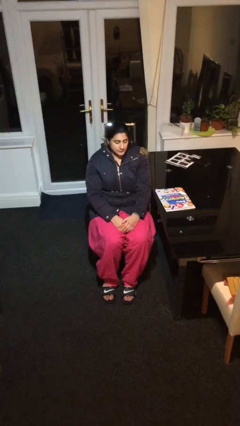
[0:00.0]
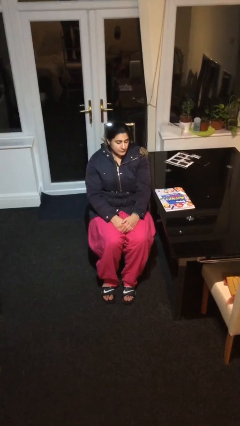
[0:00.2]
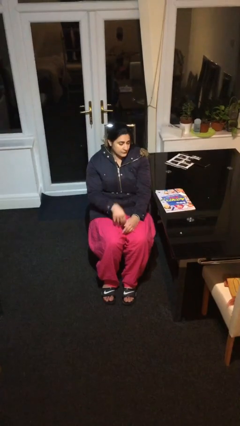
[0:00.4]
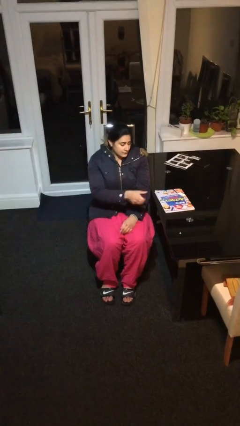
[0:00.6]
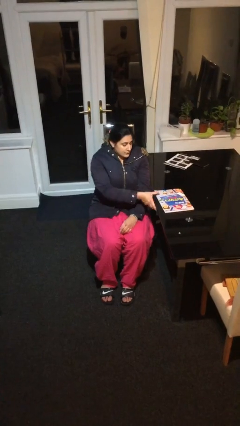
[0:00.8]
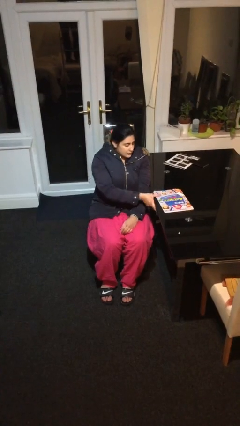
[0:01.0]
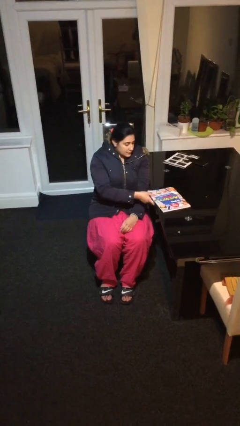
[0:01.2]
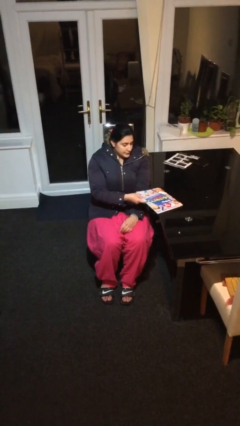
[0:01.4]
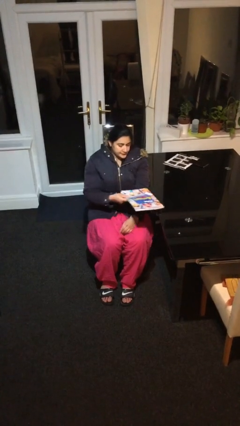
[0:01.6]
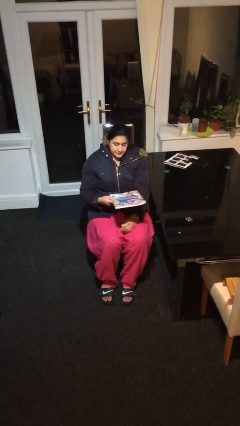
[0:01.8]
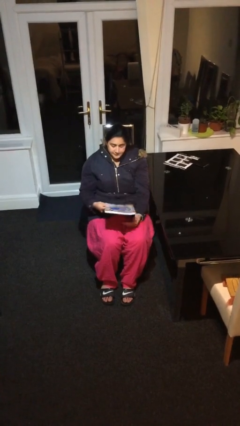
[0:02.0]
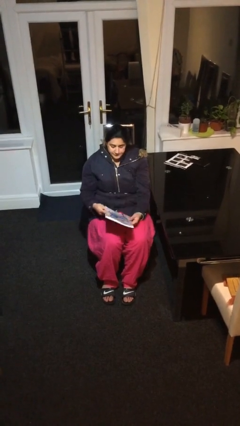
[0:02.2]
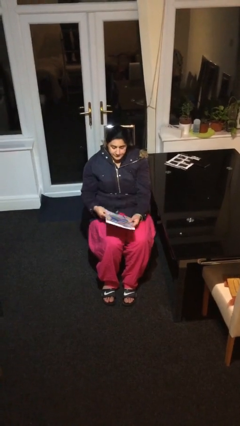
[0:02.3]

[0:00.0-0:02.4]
person picks up object from table

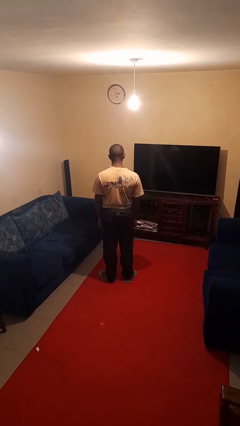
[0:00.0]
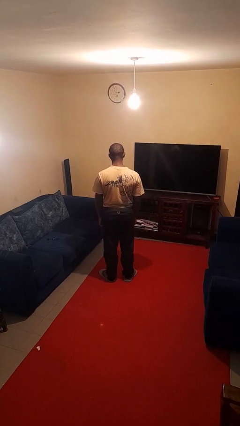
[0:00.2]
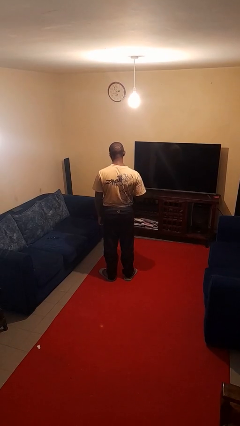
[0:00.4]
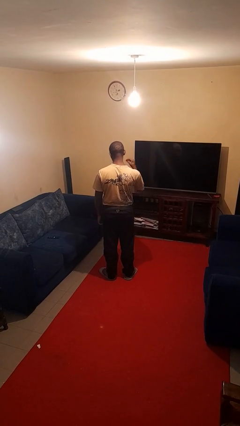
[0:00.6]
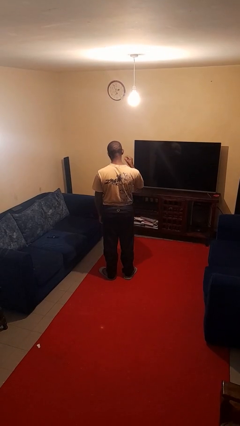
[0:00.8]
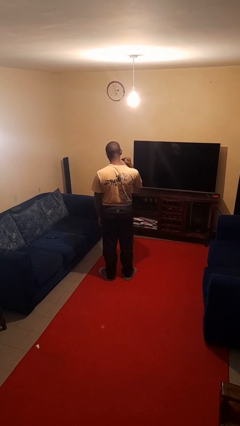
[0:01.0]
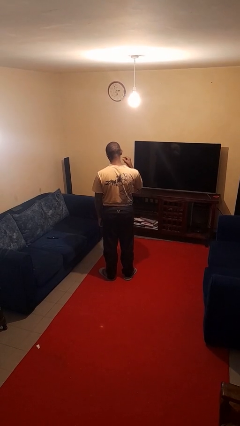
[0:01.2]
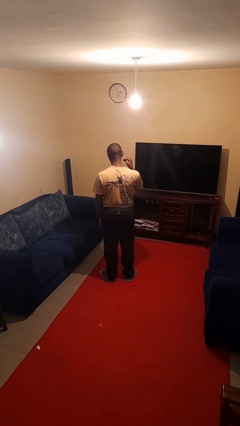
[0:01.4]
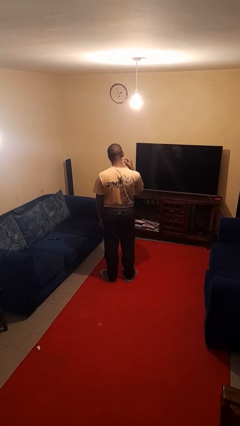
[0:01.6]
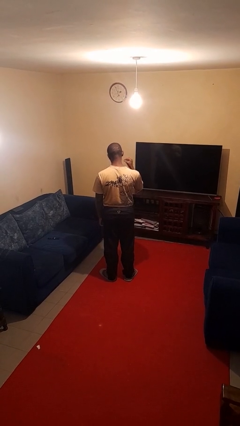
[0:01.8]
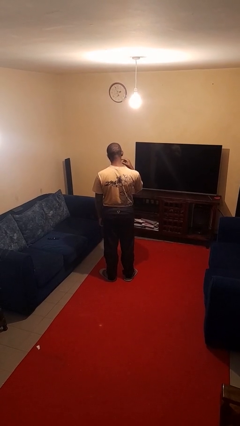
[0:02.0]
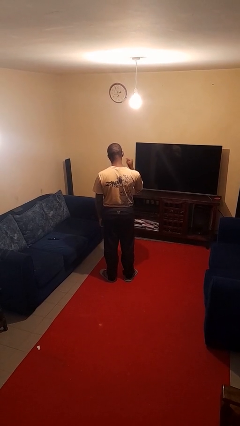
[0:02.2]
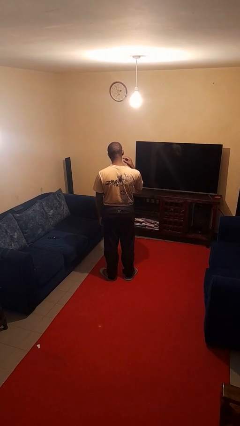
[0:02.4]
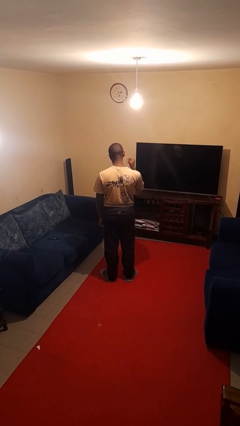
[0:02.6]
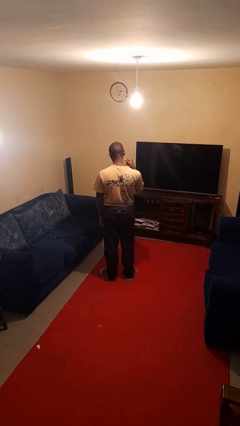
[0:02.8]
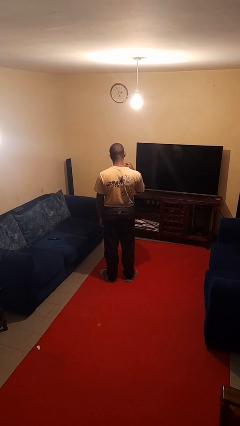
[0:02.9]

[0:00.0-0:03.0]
person snaps fingers

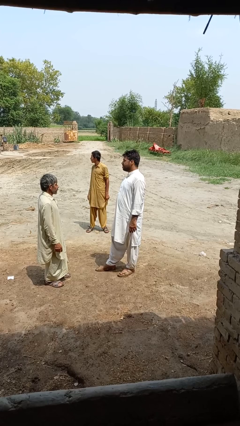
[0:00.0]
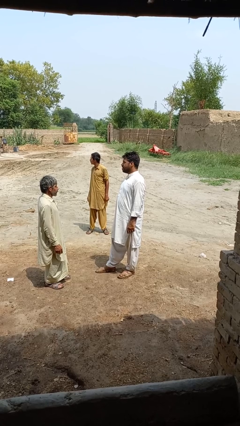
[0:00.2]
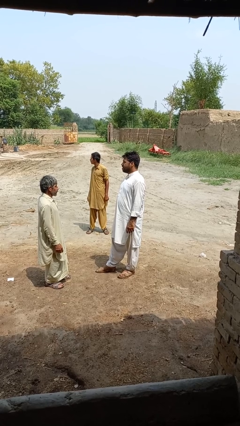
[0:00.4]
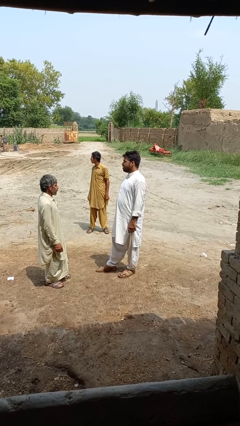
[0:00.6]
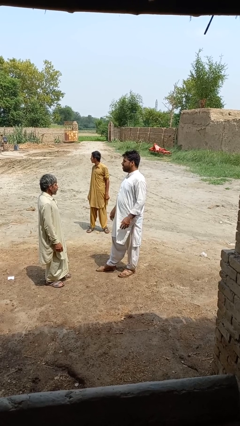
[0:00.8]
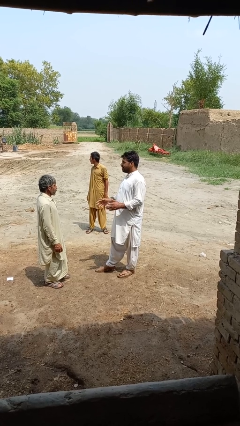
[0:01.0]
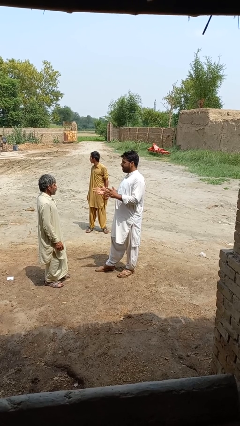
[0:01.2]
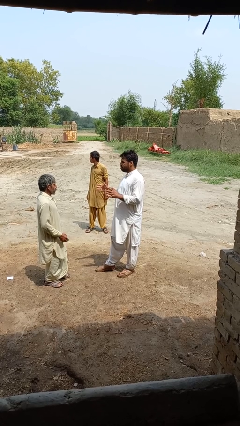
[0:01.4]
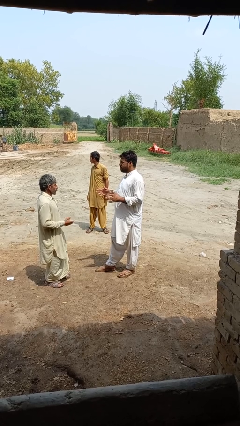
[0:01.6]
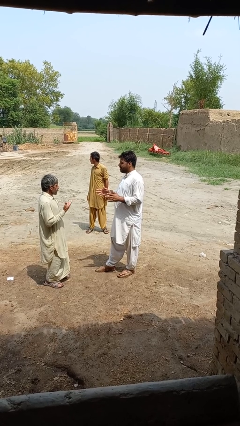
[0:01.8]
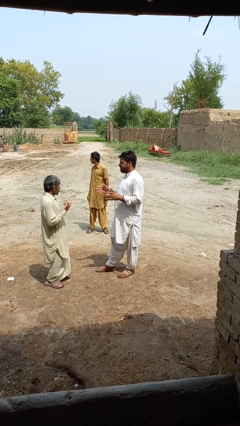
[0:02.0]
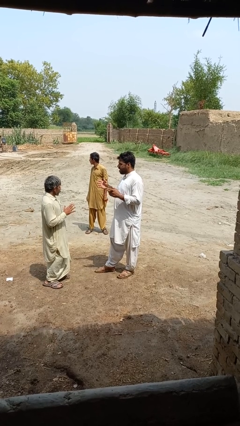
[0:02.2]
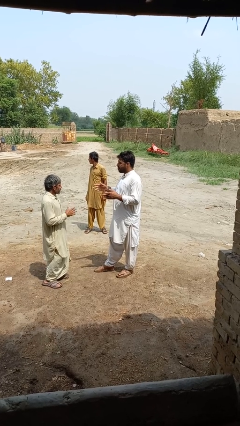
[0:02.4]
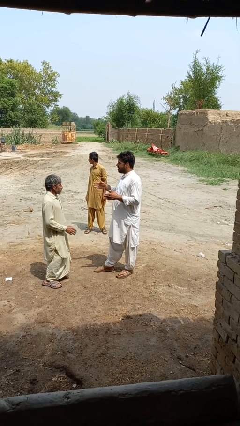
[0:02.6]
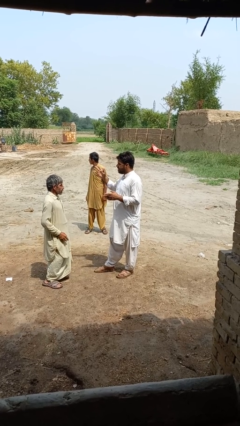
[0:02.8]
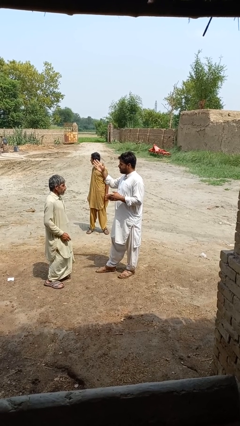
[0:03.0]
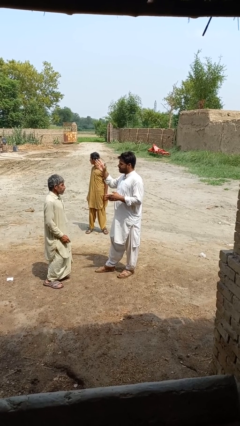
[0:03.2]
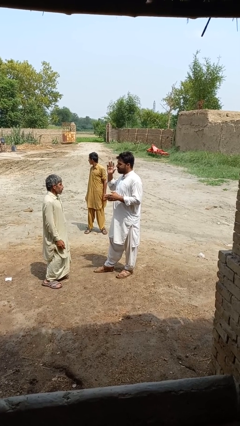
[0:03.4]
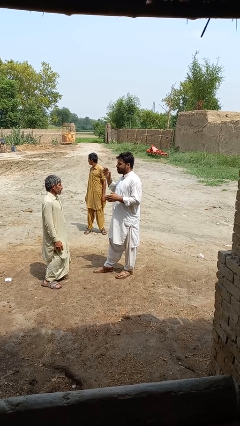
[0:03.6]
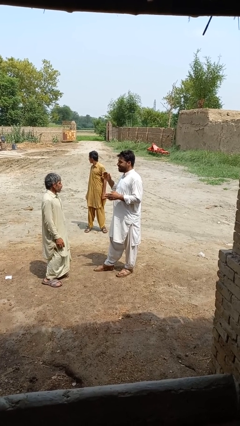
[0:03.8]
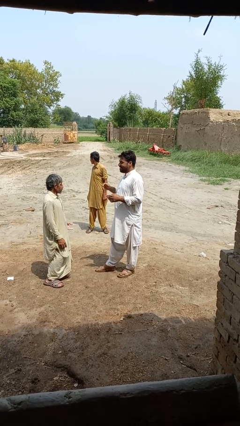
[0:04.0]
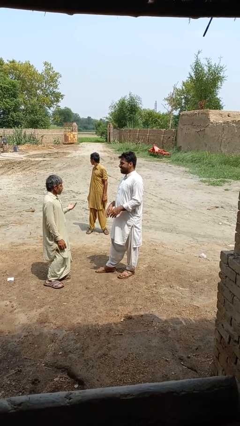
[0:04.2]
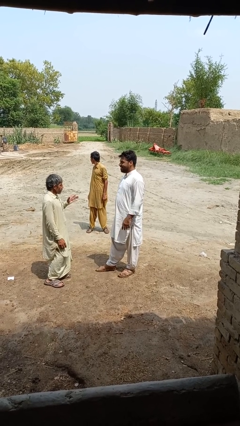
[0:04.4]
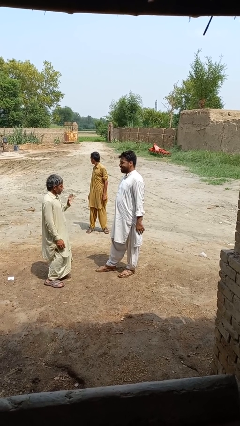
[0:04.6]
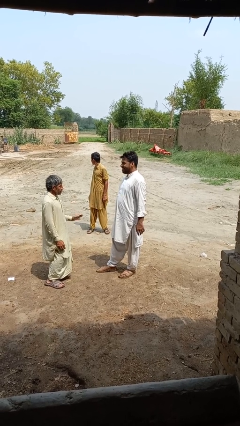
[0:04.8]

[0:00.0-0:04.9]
person talks to person

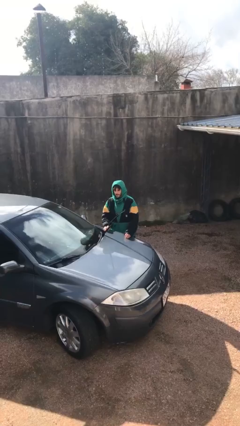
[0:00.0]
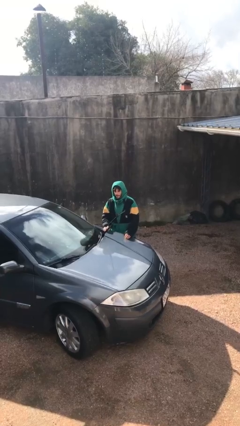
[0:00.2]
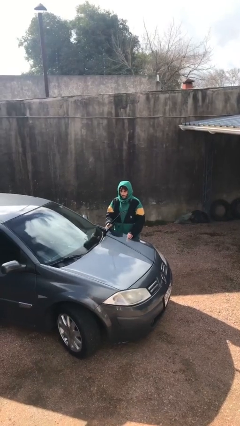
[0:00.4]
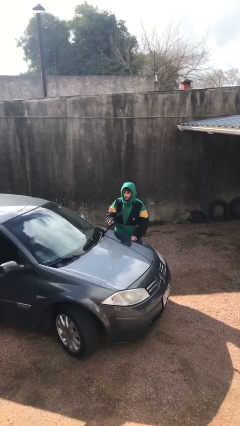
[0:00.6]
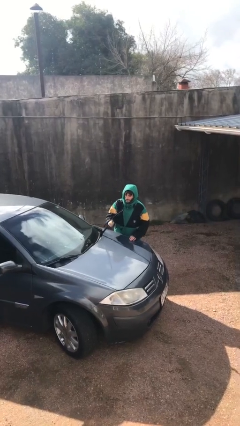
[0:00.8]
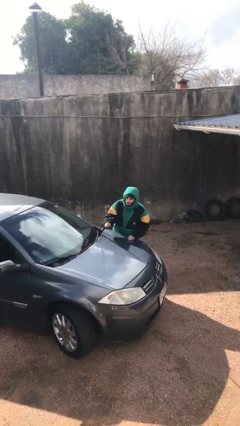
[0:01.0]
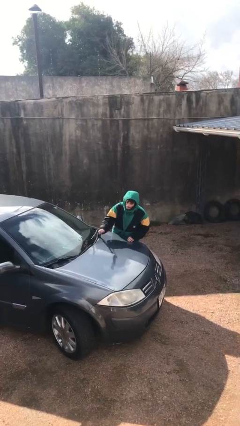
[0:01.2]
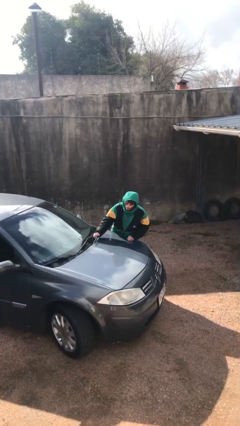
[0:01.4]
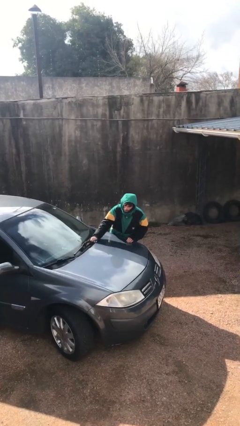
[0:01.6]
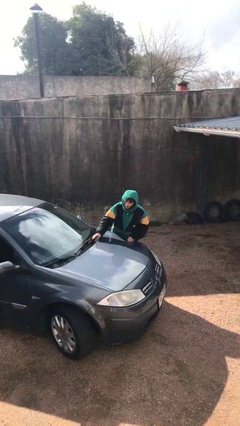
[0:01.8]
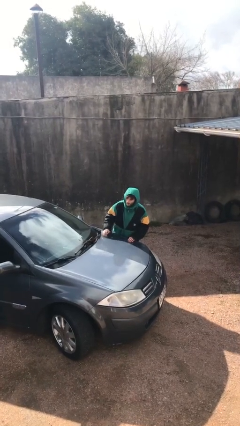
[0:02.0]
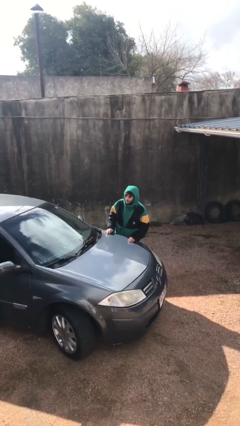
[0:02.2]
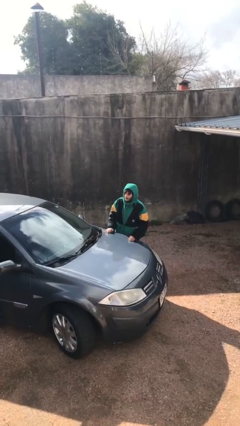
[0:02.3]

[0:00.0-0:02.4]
person flips down car wipers

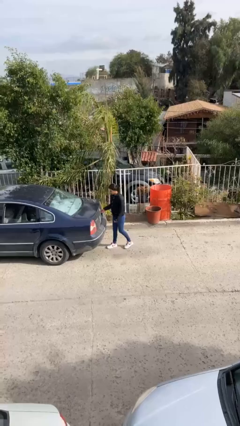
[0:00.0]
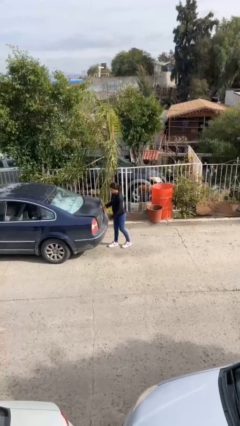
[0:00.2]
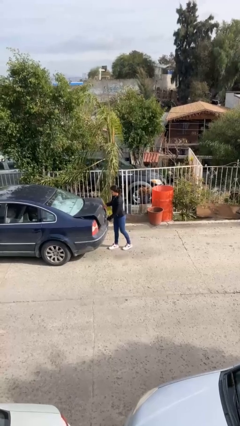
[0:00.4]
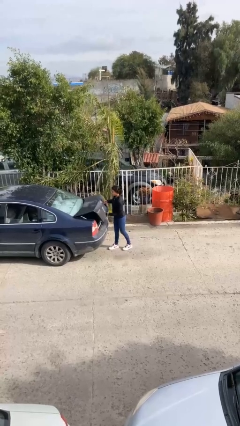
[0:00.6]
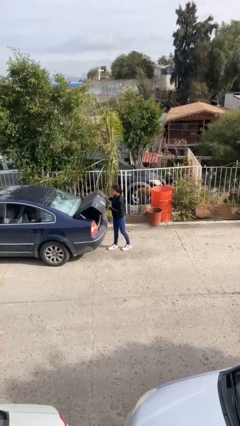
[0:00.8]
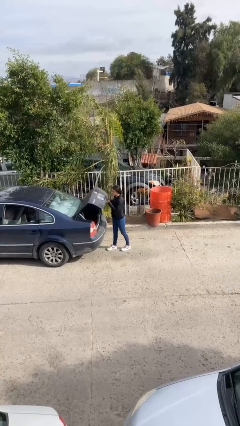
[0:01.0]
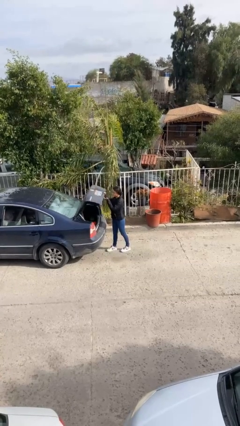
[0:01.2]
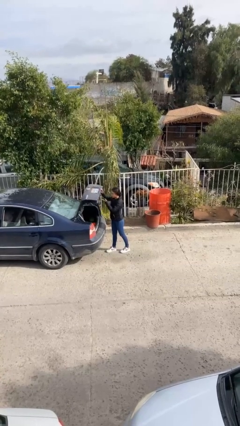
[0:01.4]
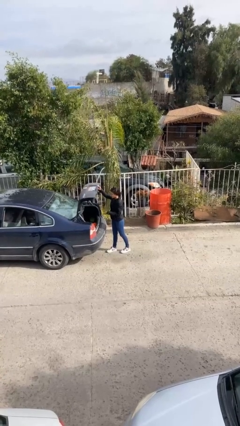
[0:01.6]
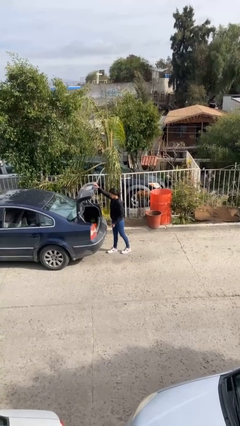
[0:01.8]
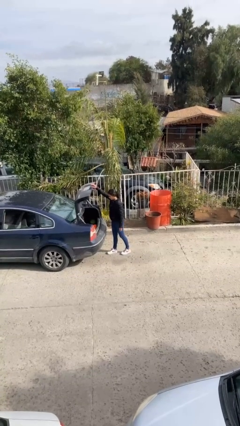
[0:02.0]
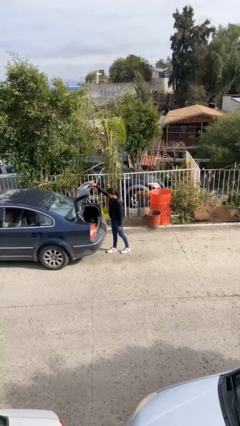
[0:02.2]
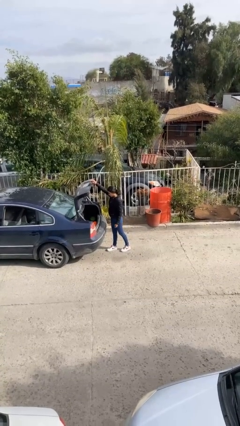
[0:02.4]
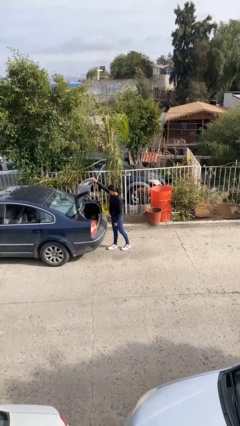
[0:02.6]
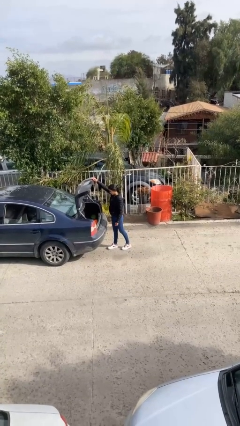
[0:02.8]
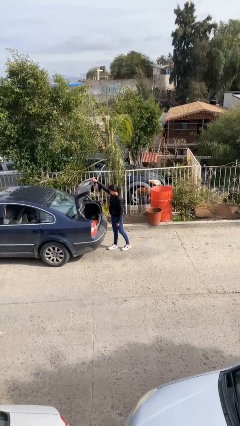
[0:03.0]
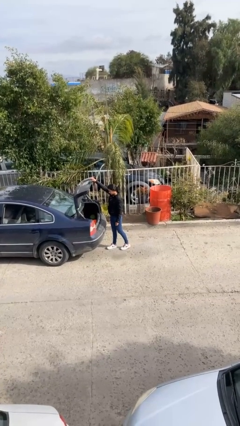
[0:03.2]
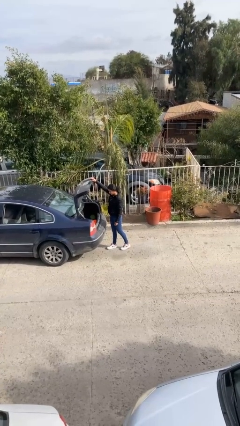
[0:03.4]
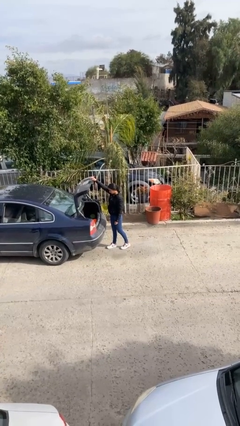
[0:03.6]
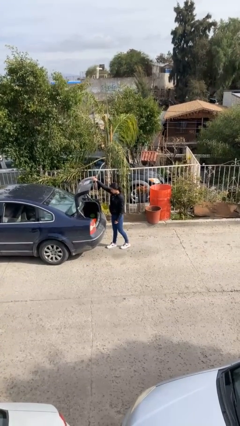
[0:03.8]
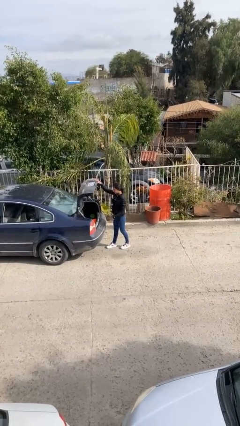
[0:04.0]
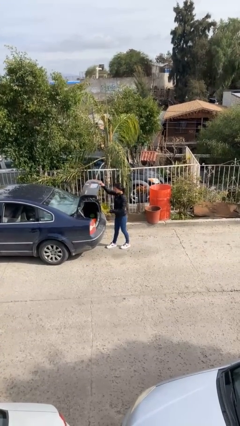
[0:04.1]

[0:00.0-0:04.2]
person opens car trunk

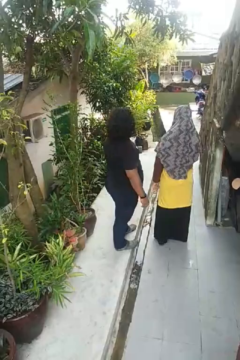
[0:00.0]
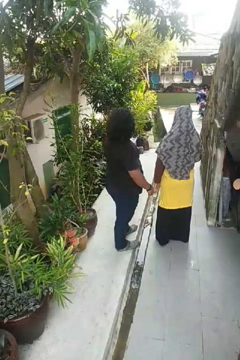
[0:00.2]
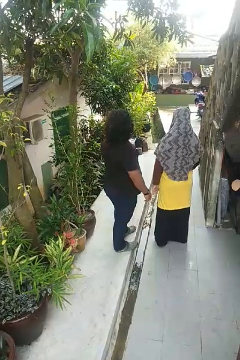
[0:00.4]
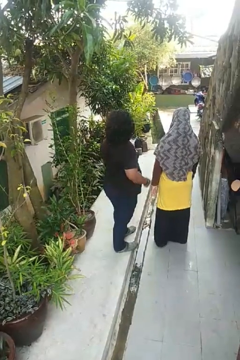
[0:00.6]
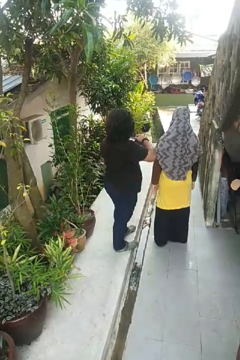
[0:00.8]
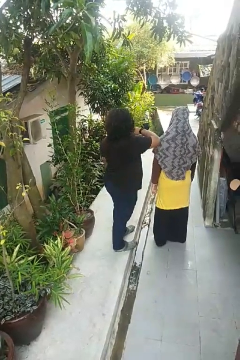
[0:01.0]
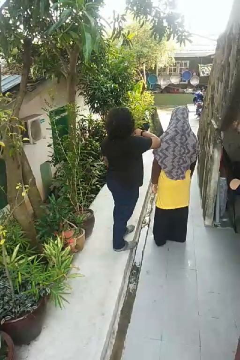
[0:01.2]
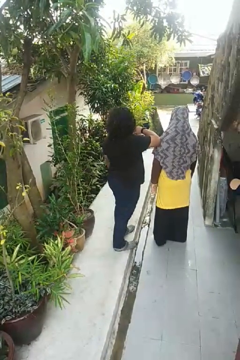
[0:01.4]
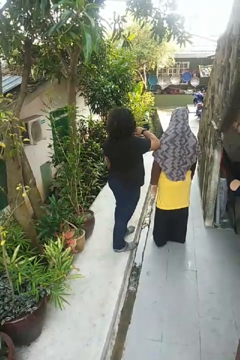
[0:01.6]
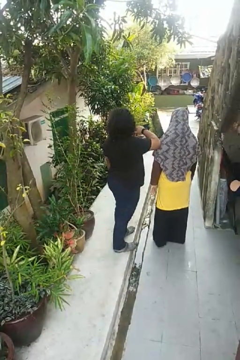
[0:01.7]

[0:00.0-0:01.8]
person nudges person with elbow
